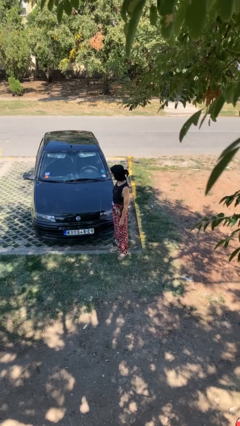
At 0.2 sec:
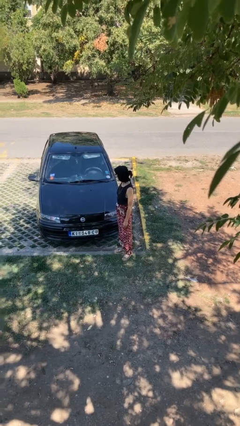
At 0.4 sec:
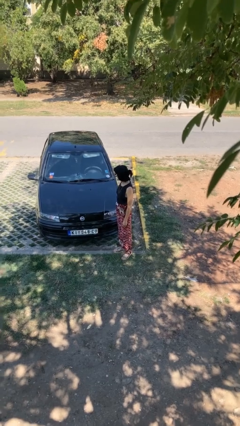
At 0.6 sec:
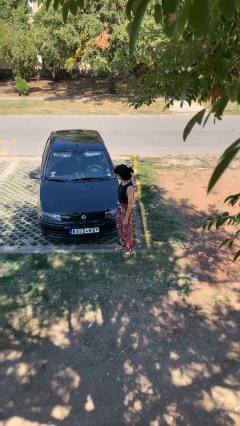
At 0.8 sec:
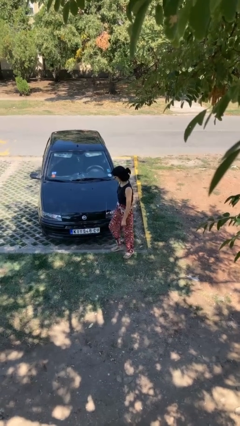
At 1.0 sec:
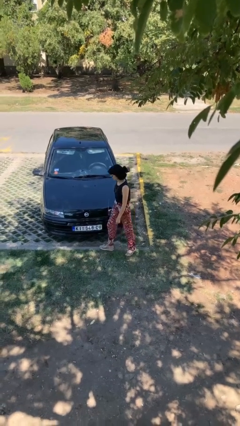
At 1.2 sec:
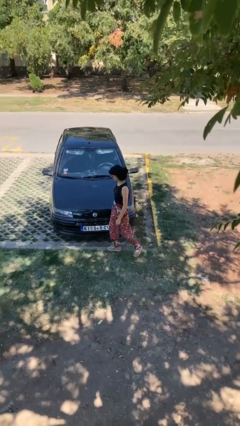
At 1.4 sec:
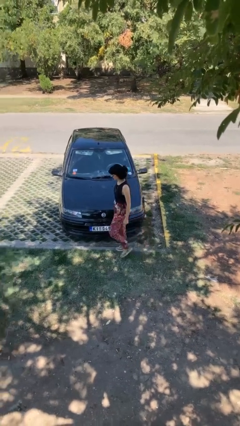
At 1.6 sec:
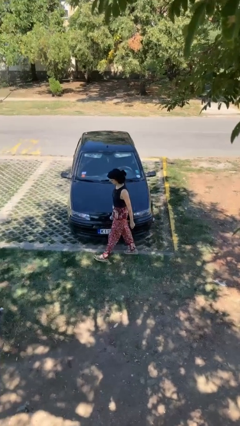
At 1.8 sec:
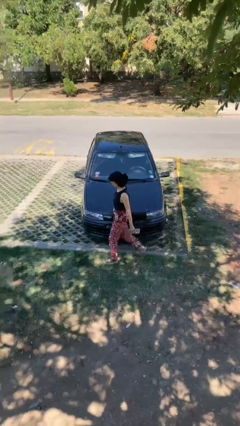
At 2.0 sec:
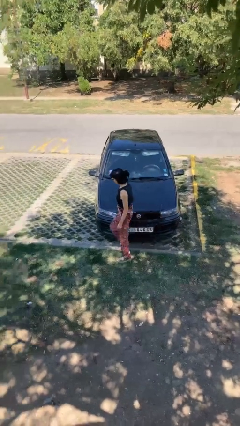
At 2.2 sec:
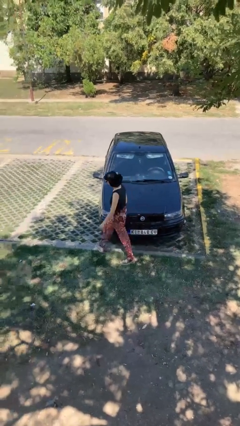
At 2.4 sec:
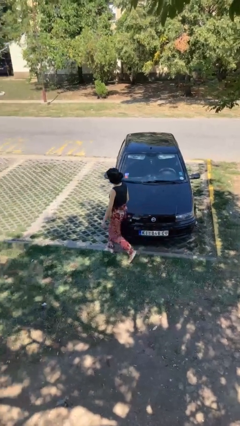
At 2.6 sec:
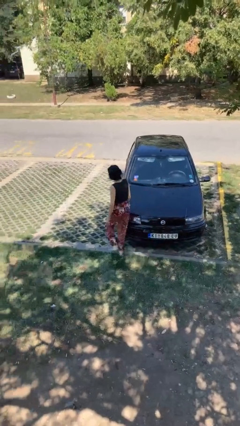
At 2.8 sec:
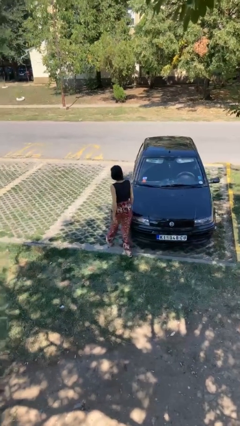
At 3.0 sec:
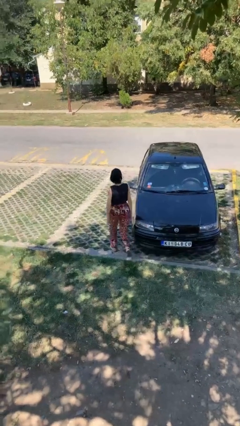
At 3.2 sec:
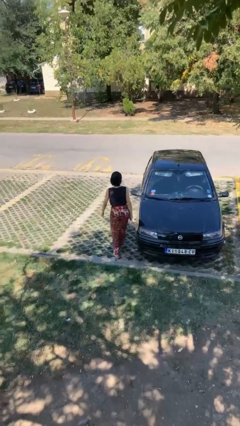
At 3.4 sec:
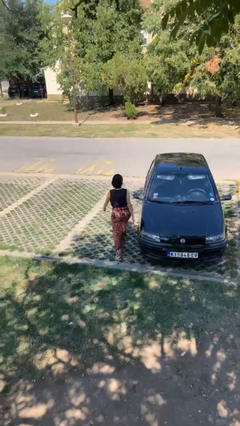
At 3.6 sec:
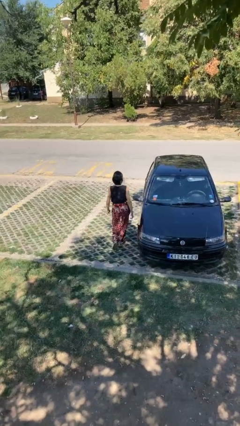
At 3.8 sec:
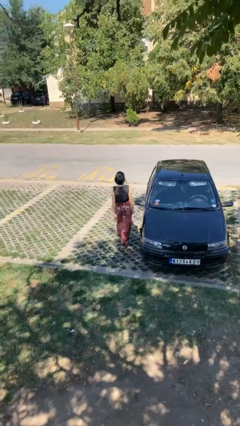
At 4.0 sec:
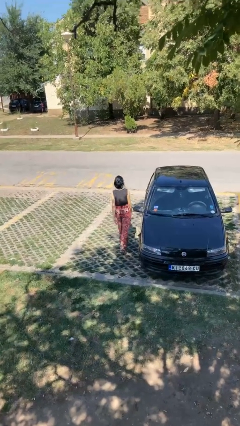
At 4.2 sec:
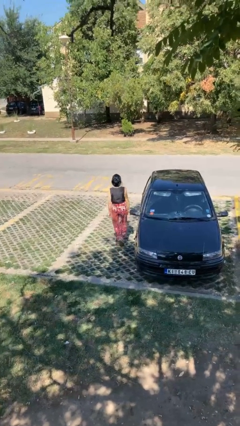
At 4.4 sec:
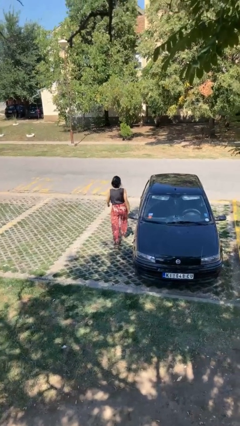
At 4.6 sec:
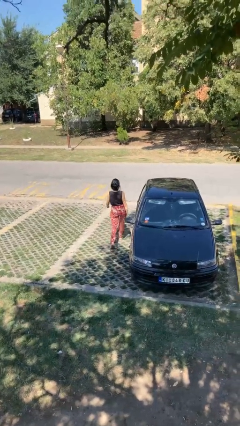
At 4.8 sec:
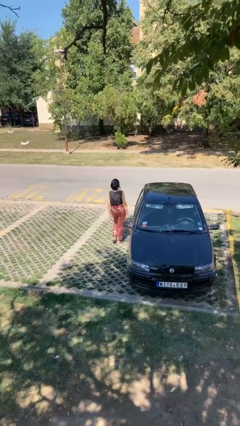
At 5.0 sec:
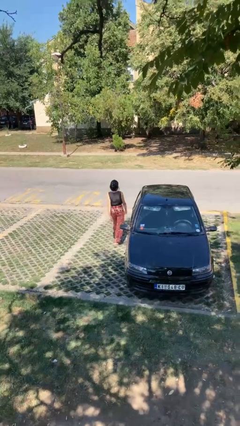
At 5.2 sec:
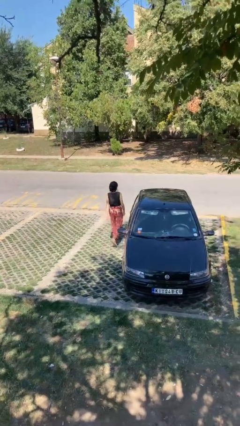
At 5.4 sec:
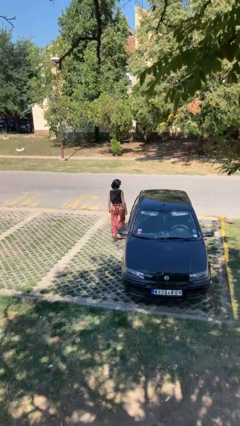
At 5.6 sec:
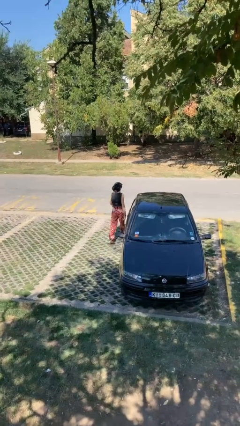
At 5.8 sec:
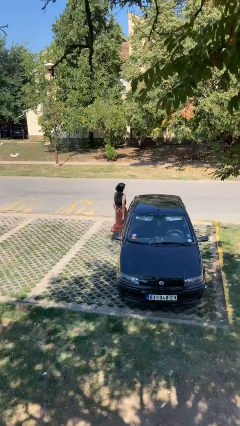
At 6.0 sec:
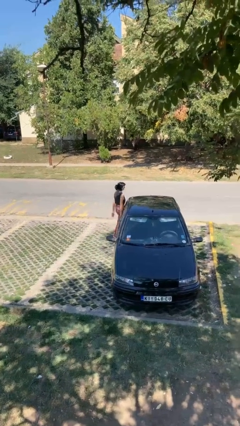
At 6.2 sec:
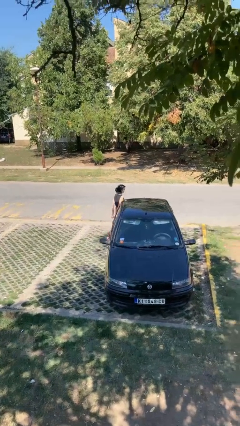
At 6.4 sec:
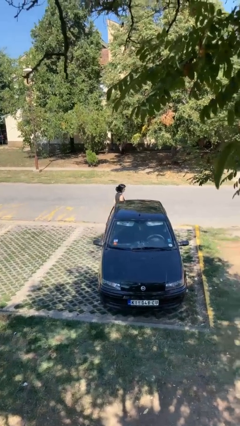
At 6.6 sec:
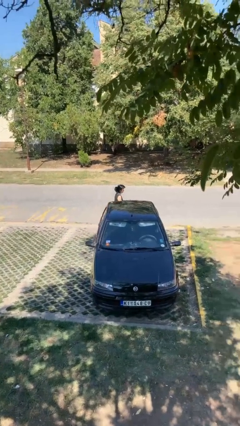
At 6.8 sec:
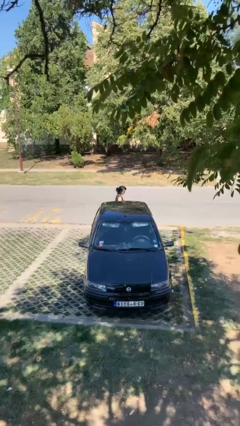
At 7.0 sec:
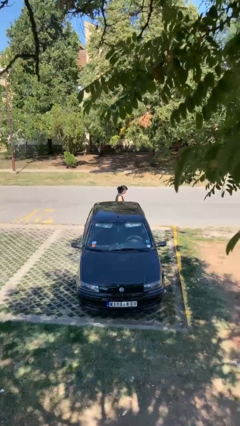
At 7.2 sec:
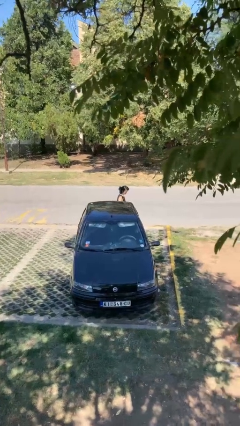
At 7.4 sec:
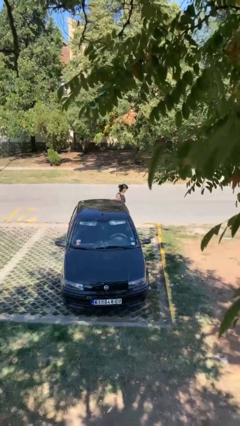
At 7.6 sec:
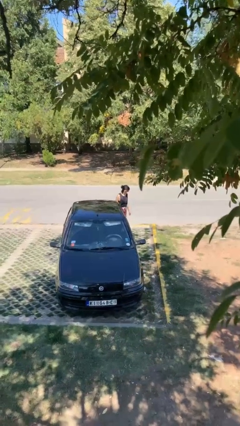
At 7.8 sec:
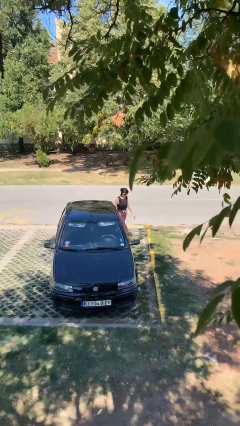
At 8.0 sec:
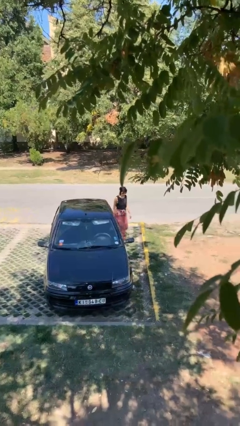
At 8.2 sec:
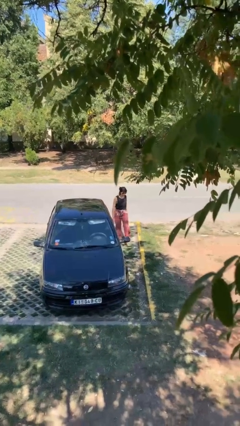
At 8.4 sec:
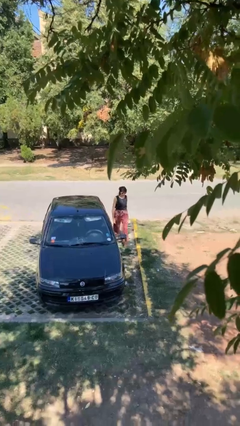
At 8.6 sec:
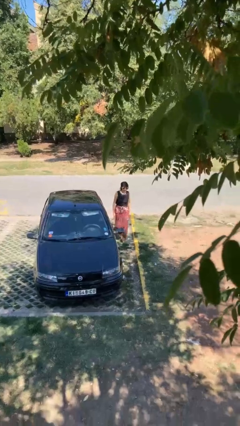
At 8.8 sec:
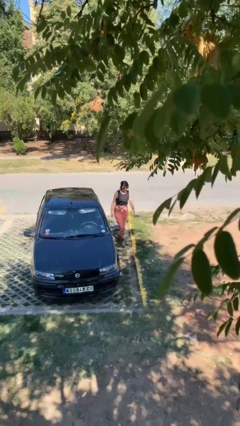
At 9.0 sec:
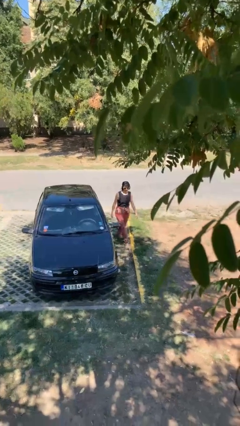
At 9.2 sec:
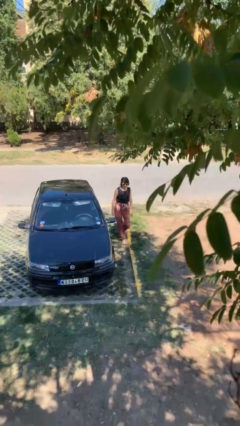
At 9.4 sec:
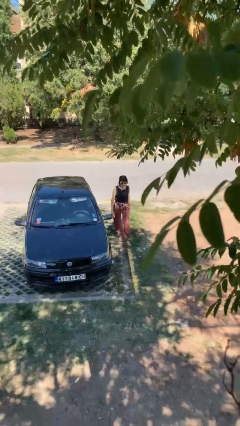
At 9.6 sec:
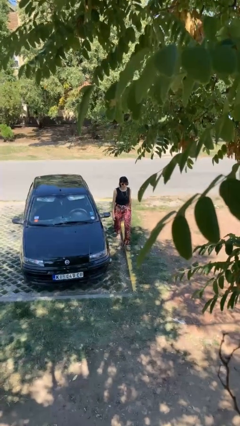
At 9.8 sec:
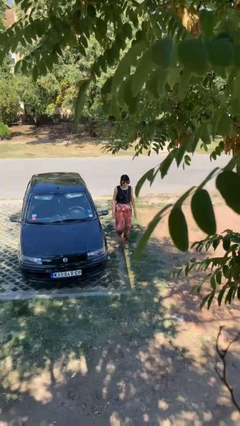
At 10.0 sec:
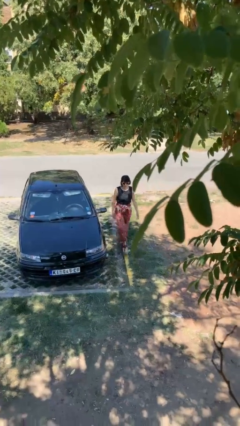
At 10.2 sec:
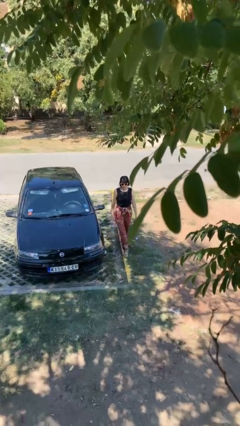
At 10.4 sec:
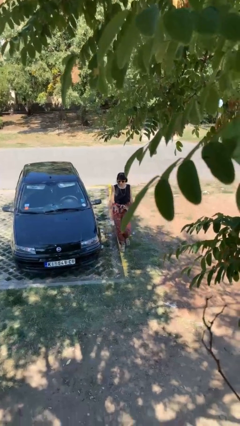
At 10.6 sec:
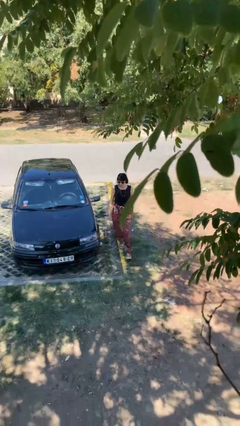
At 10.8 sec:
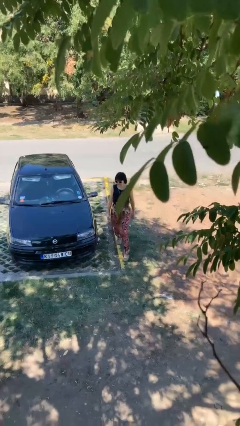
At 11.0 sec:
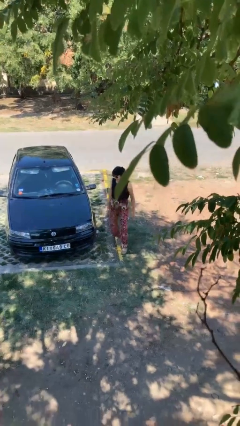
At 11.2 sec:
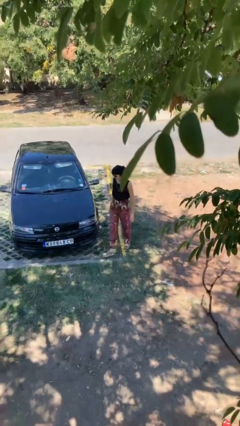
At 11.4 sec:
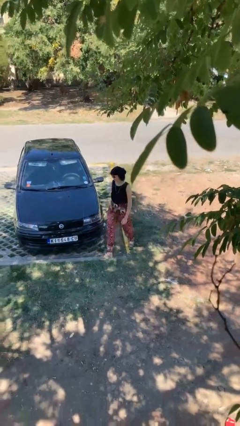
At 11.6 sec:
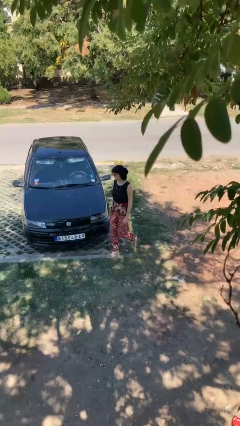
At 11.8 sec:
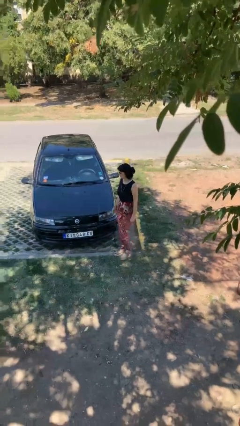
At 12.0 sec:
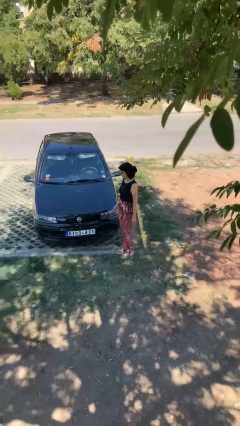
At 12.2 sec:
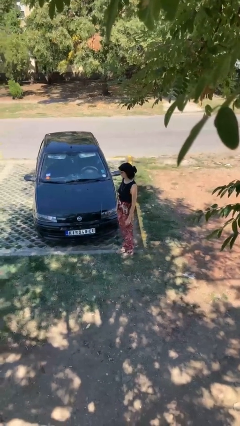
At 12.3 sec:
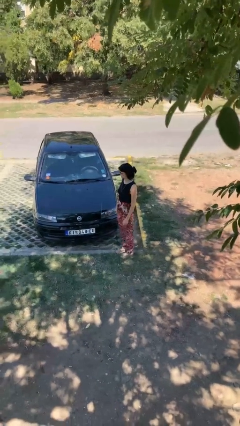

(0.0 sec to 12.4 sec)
person walks around car

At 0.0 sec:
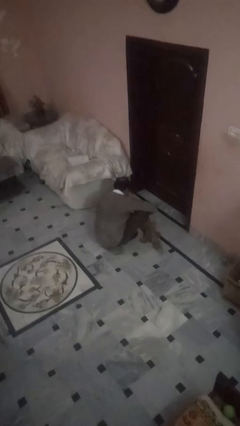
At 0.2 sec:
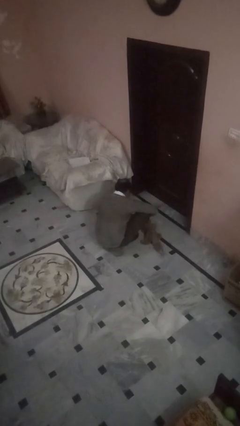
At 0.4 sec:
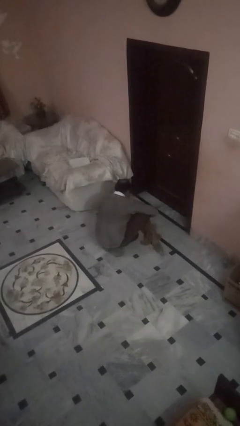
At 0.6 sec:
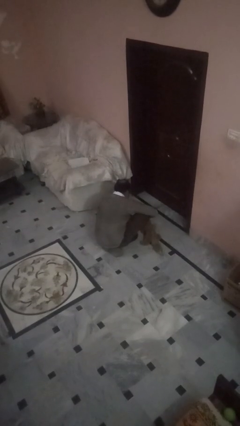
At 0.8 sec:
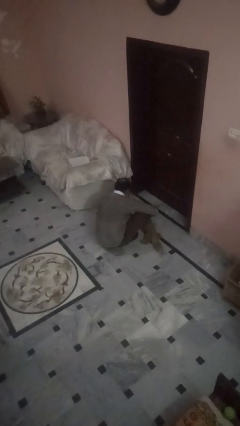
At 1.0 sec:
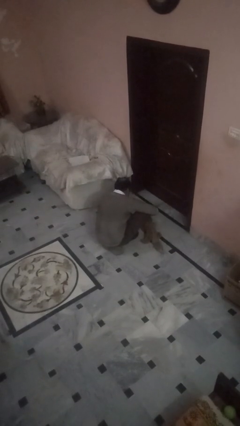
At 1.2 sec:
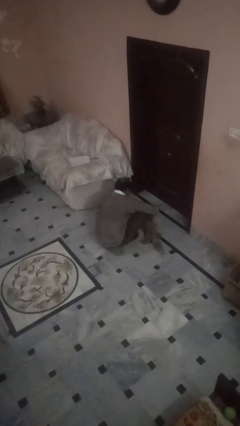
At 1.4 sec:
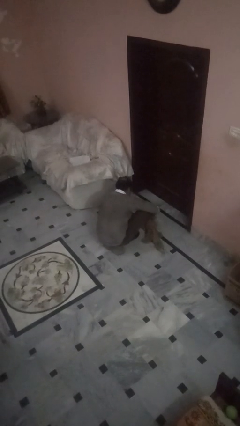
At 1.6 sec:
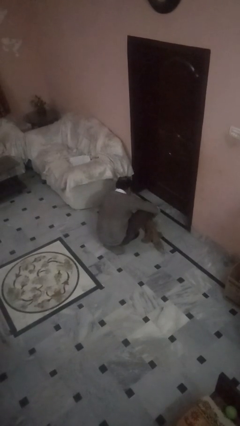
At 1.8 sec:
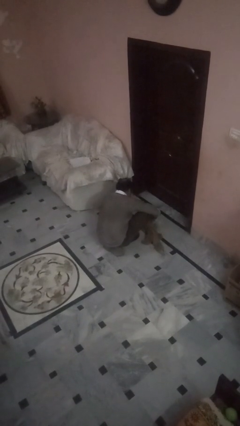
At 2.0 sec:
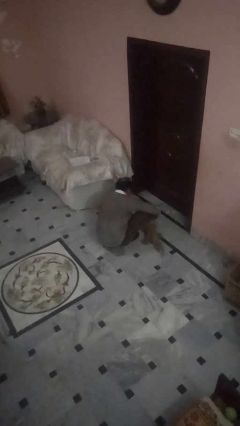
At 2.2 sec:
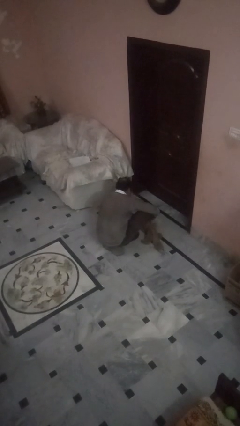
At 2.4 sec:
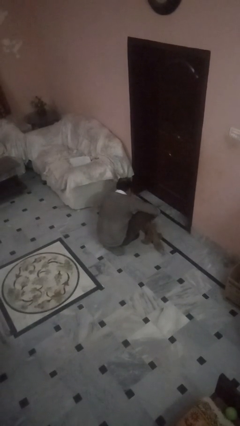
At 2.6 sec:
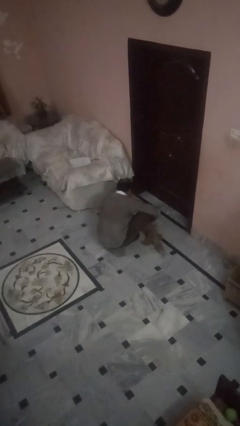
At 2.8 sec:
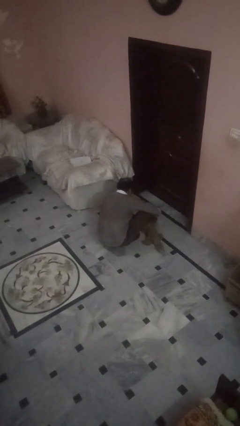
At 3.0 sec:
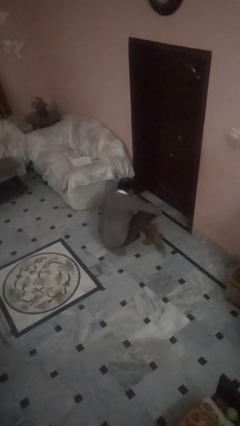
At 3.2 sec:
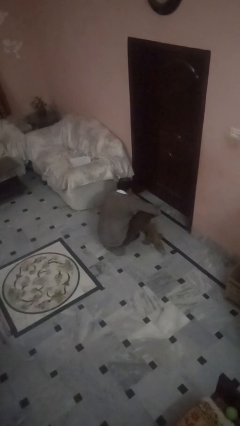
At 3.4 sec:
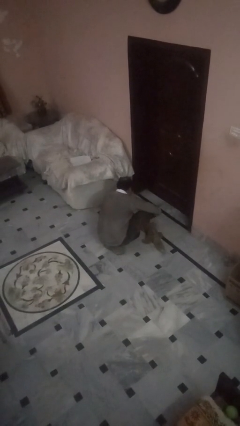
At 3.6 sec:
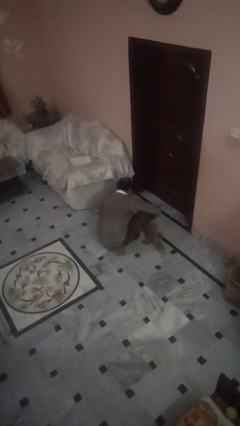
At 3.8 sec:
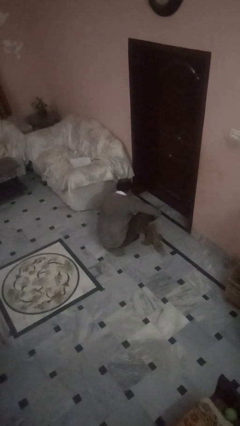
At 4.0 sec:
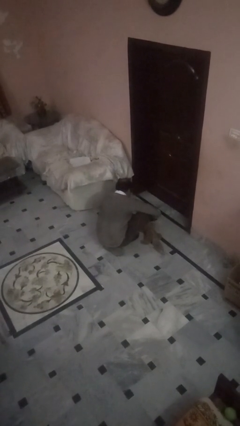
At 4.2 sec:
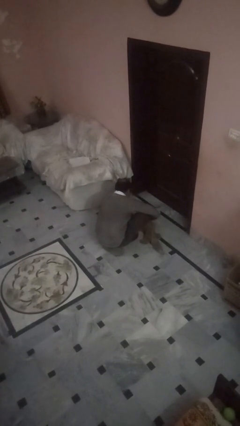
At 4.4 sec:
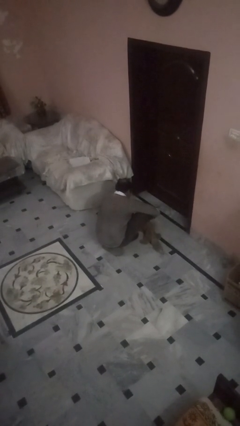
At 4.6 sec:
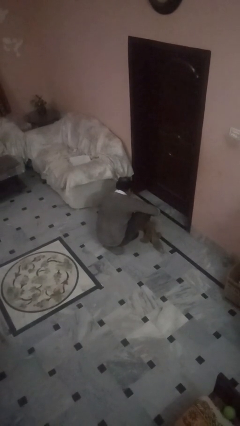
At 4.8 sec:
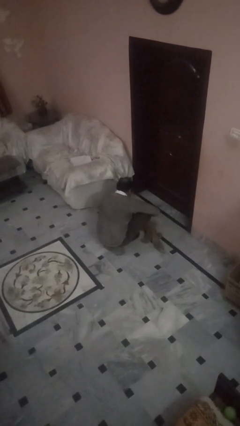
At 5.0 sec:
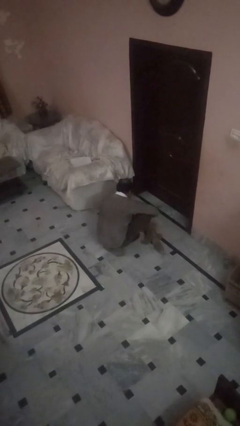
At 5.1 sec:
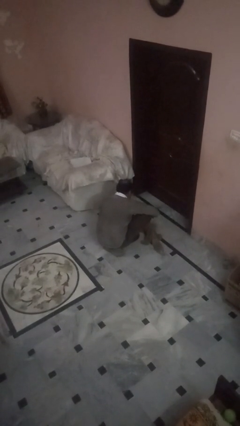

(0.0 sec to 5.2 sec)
person unattaches leash from dog

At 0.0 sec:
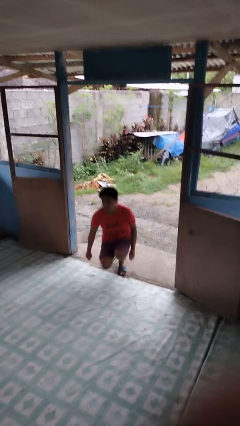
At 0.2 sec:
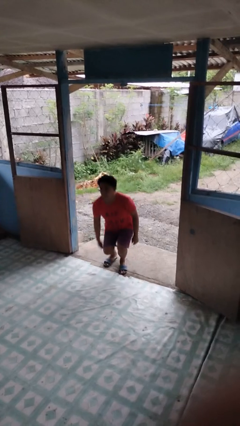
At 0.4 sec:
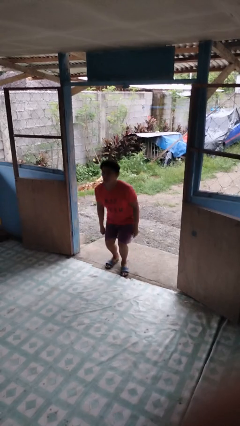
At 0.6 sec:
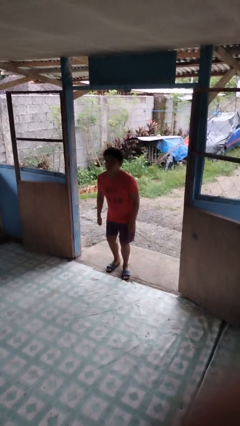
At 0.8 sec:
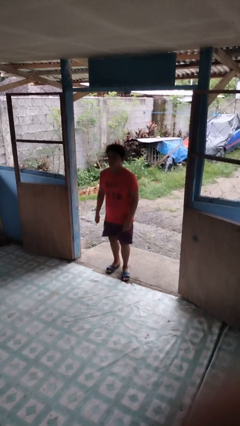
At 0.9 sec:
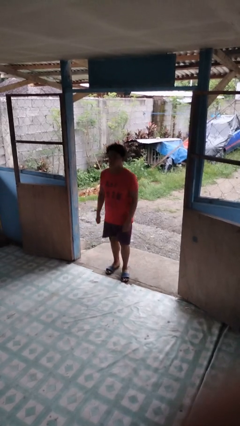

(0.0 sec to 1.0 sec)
person stands up from floor
